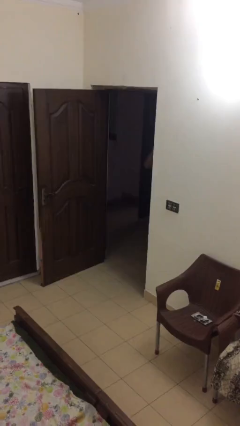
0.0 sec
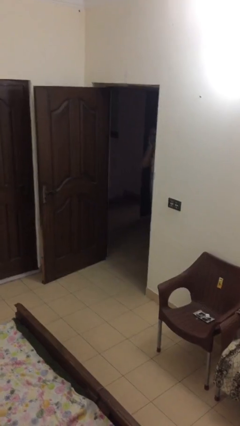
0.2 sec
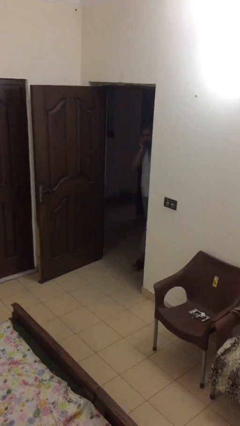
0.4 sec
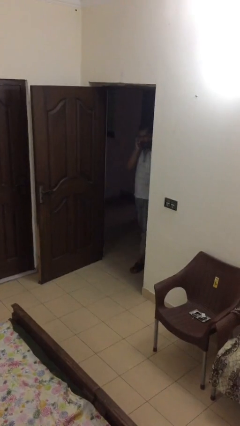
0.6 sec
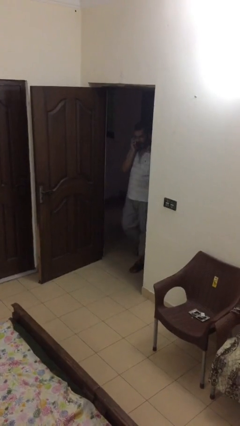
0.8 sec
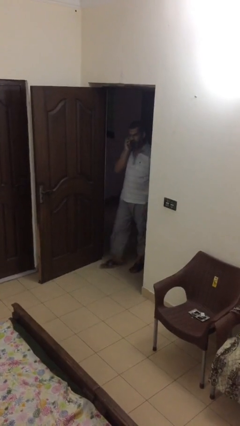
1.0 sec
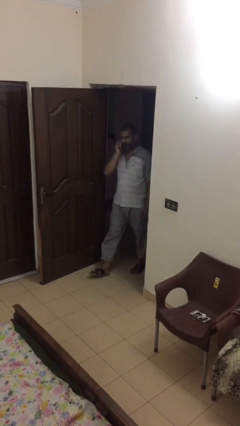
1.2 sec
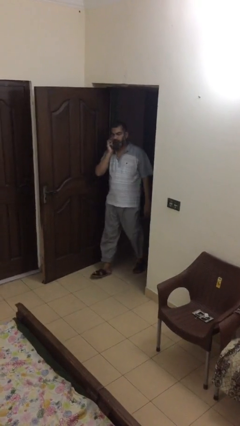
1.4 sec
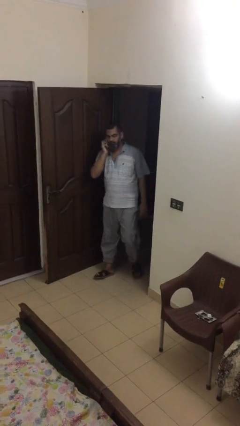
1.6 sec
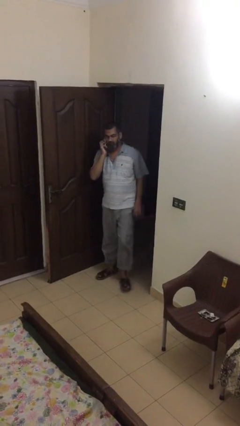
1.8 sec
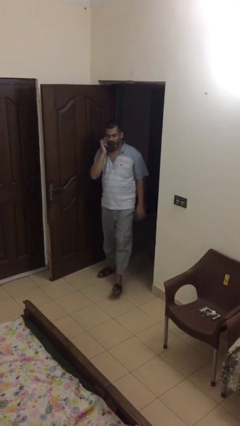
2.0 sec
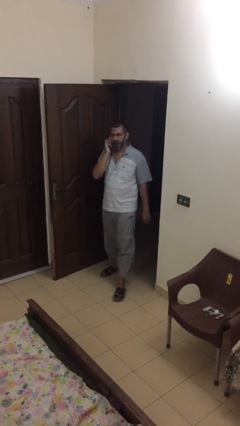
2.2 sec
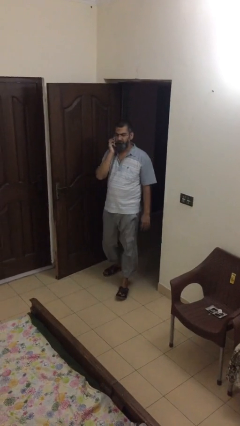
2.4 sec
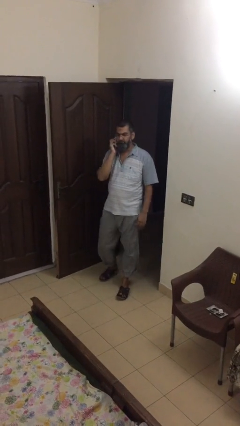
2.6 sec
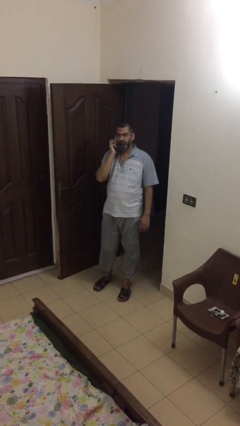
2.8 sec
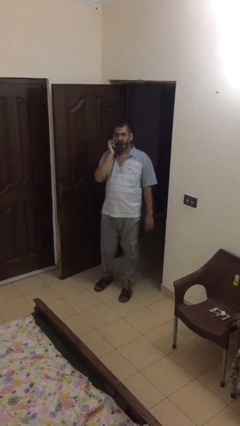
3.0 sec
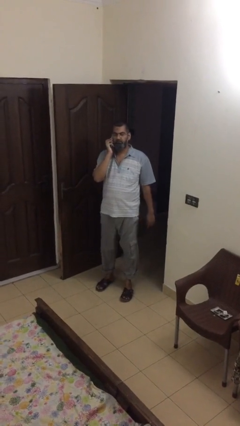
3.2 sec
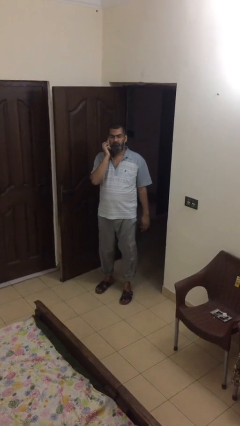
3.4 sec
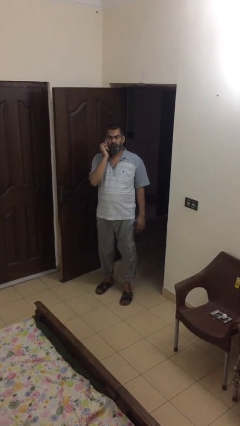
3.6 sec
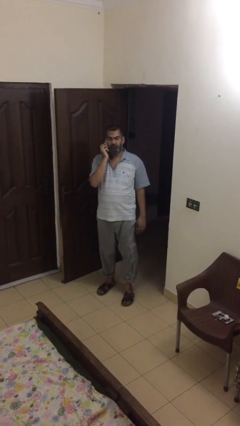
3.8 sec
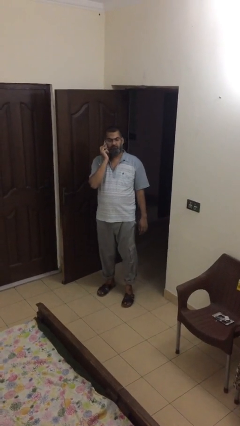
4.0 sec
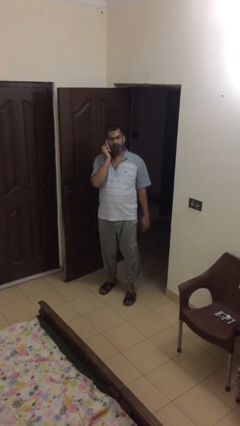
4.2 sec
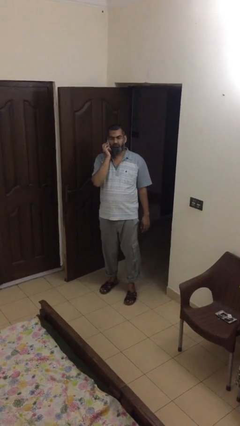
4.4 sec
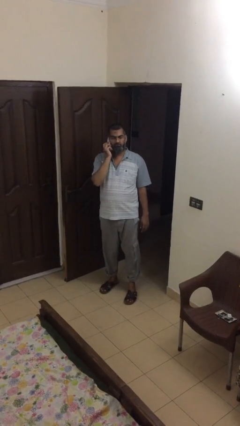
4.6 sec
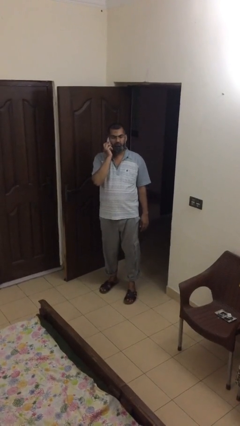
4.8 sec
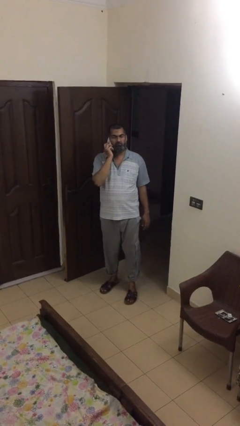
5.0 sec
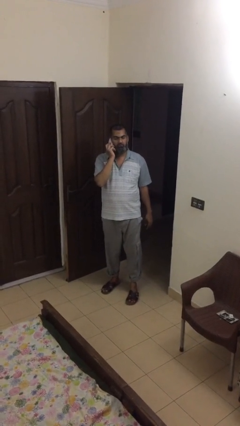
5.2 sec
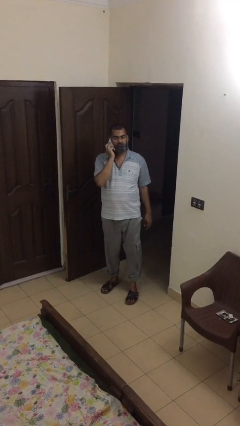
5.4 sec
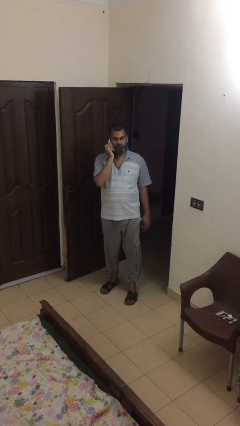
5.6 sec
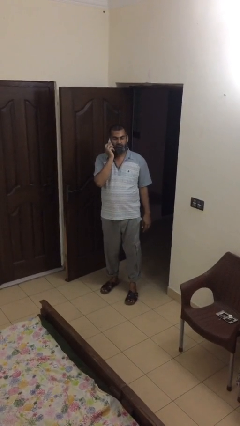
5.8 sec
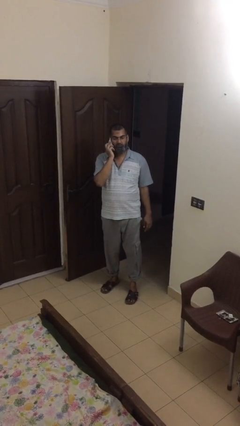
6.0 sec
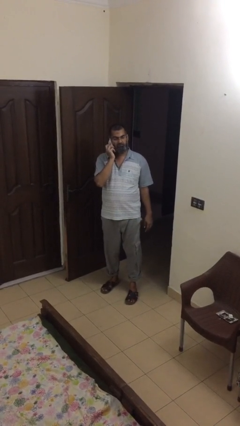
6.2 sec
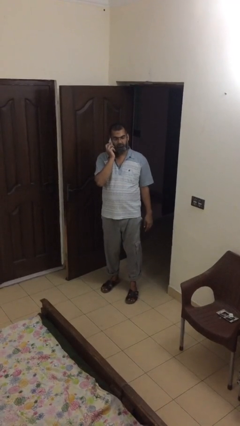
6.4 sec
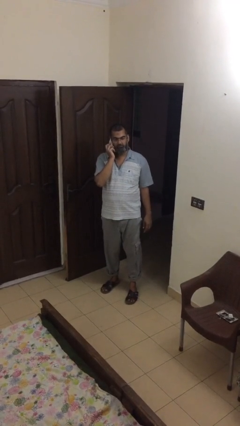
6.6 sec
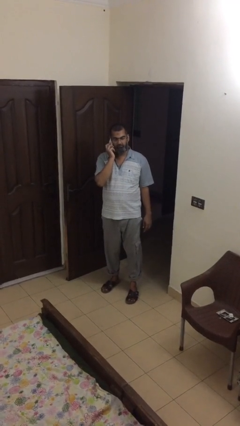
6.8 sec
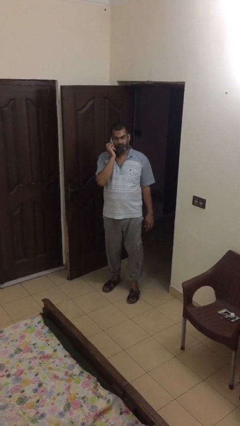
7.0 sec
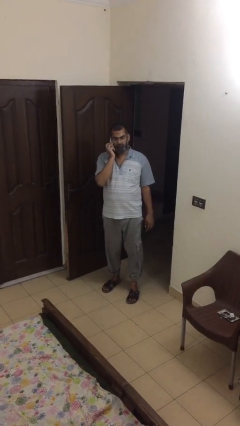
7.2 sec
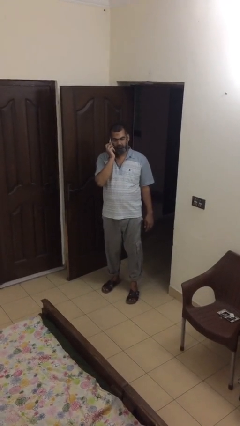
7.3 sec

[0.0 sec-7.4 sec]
person enters scene through structure

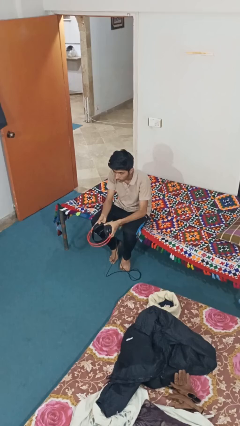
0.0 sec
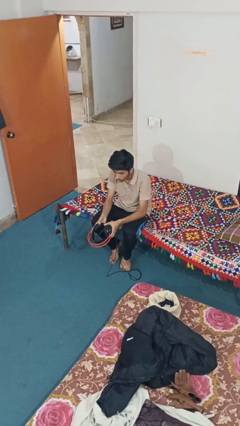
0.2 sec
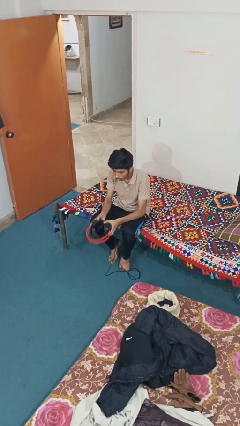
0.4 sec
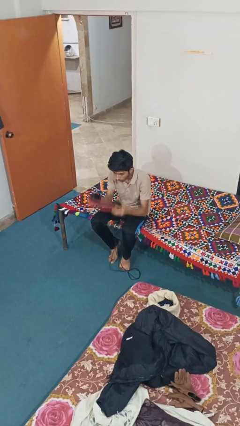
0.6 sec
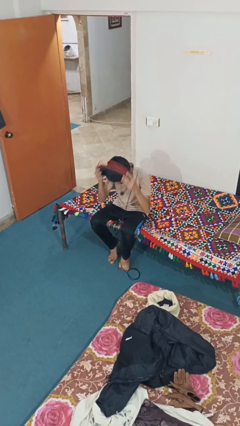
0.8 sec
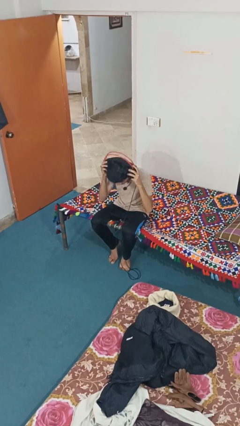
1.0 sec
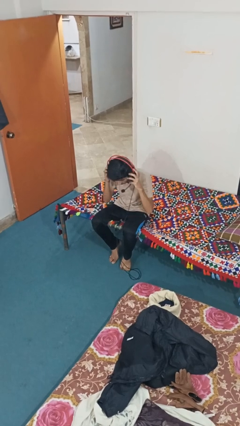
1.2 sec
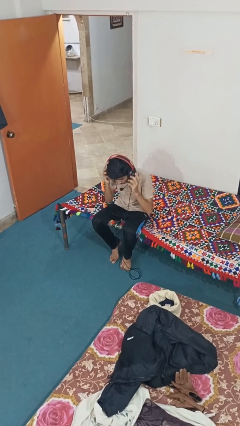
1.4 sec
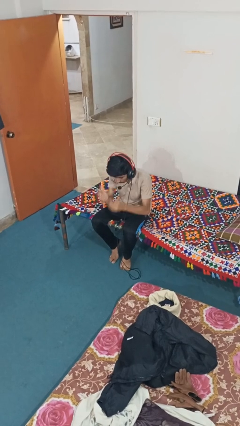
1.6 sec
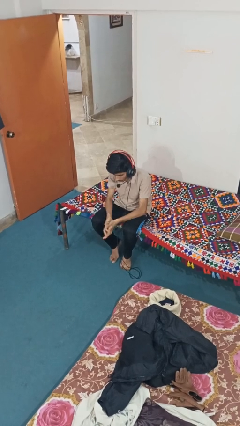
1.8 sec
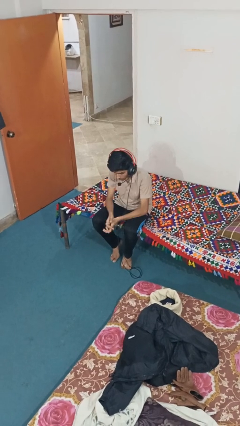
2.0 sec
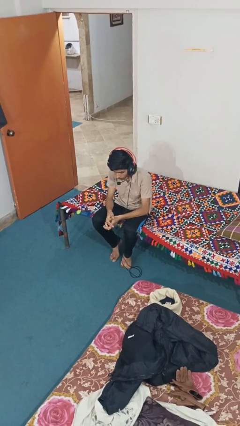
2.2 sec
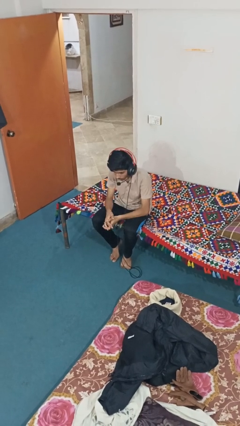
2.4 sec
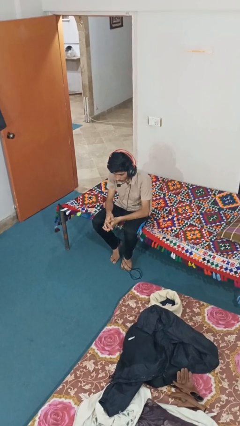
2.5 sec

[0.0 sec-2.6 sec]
person puts on headphones

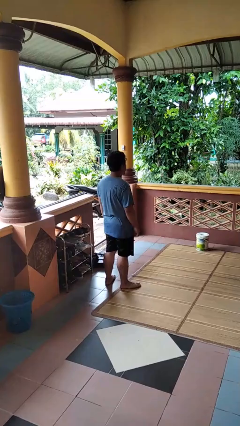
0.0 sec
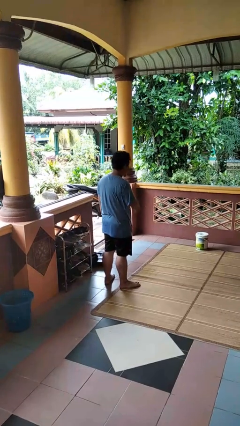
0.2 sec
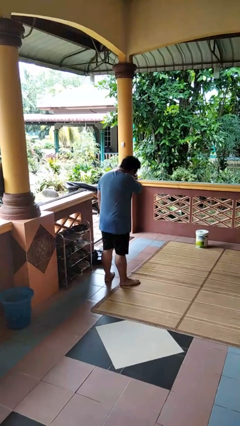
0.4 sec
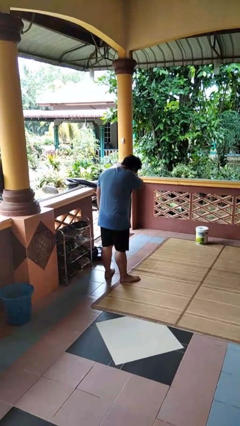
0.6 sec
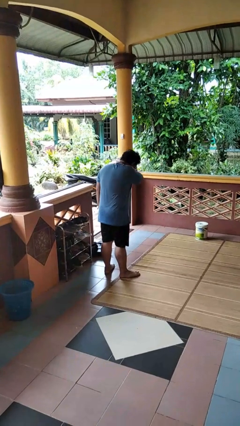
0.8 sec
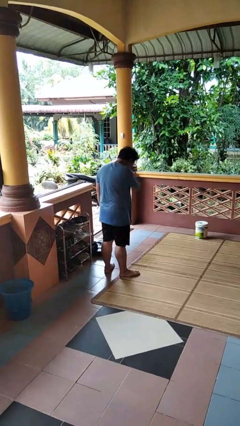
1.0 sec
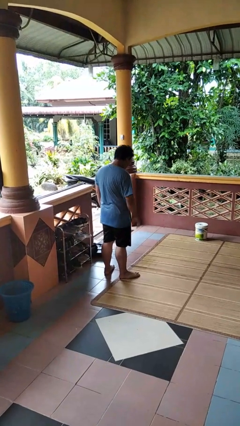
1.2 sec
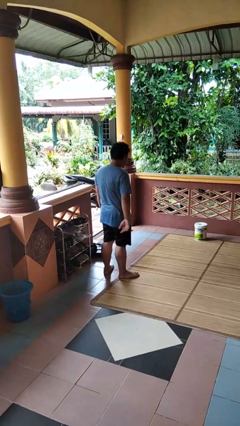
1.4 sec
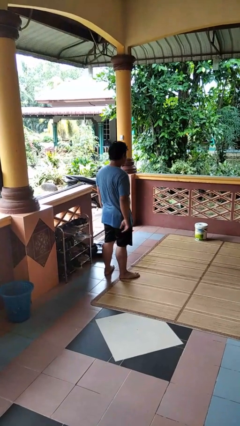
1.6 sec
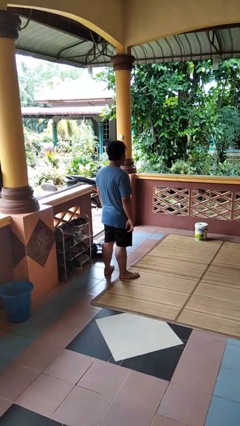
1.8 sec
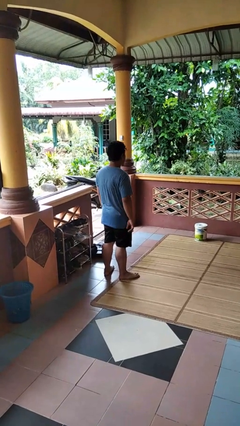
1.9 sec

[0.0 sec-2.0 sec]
person sneezes into hand

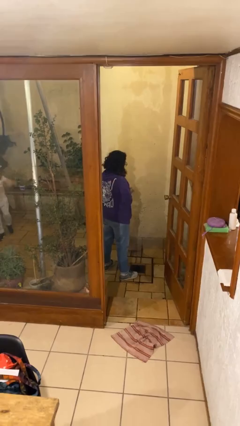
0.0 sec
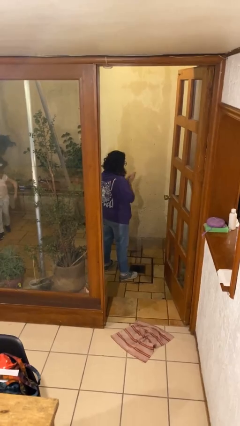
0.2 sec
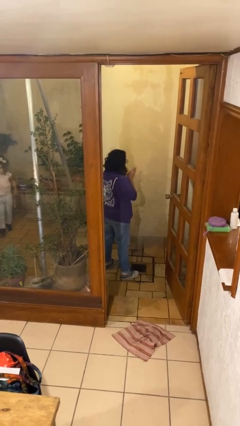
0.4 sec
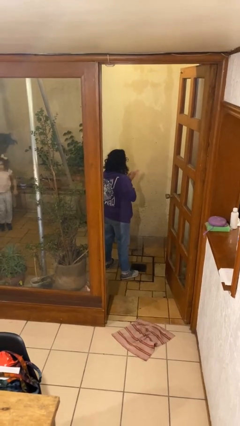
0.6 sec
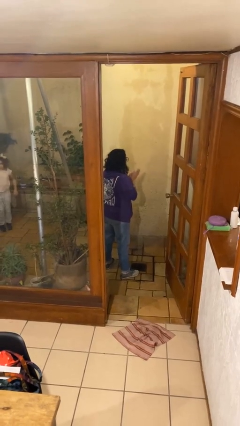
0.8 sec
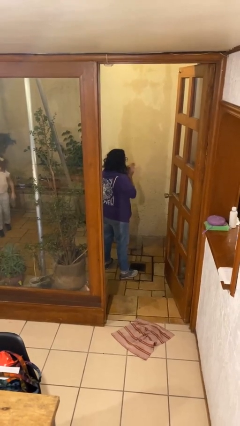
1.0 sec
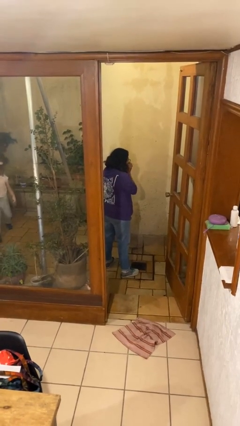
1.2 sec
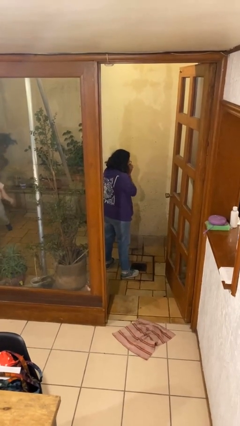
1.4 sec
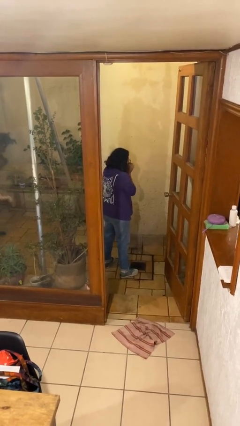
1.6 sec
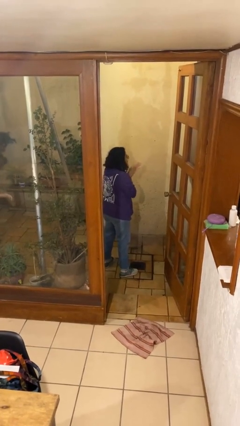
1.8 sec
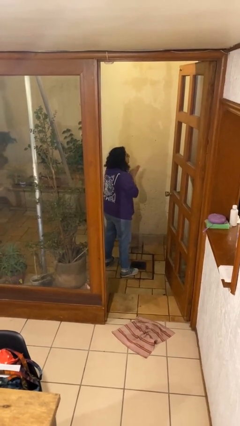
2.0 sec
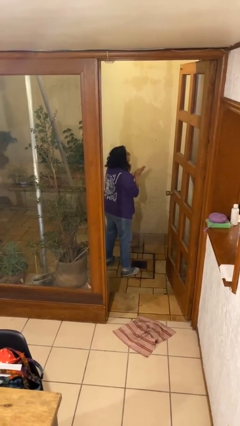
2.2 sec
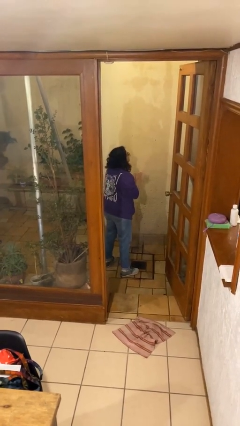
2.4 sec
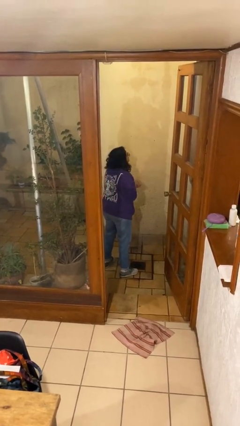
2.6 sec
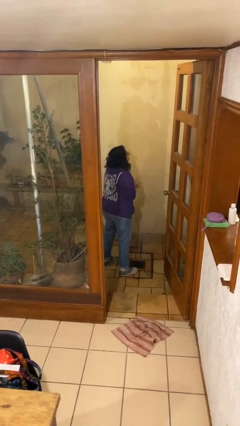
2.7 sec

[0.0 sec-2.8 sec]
person blows into hands

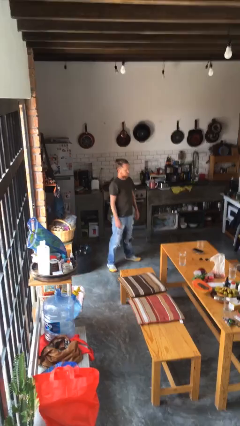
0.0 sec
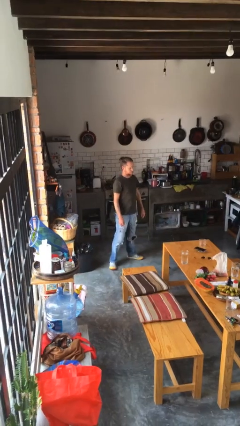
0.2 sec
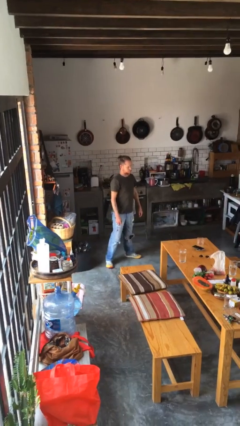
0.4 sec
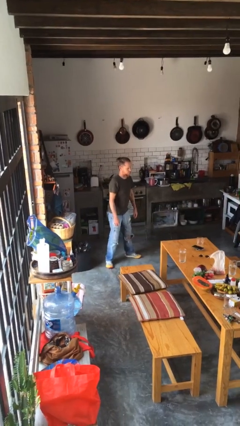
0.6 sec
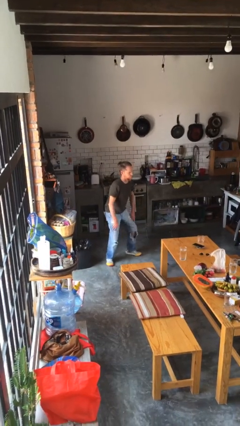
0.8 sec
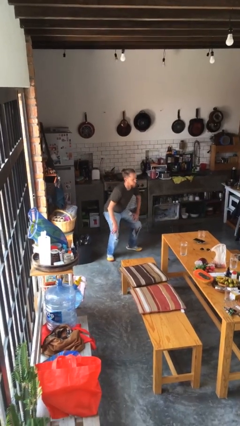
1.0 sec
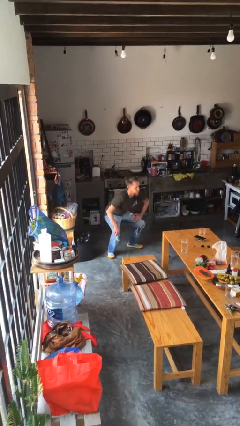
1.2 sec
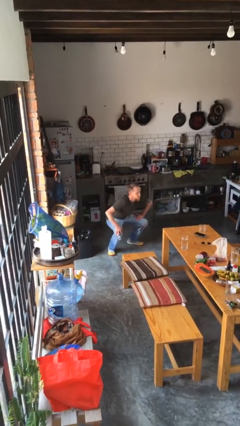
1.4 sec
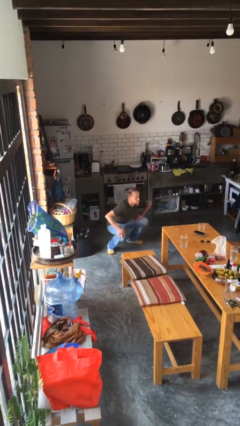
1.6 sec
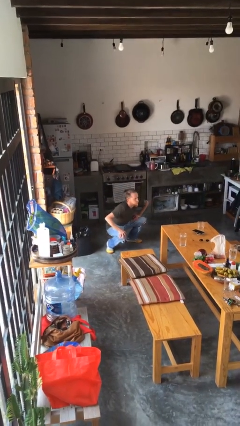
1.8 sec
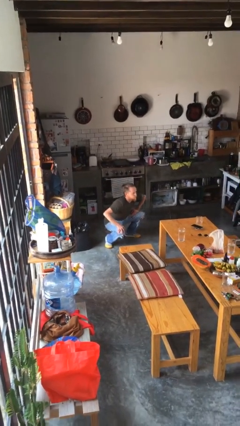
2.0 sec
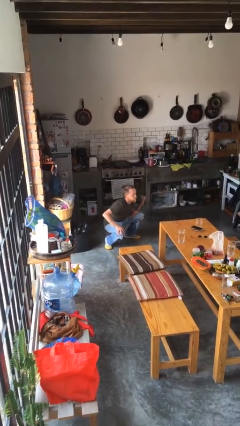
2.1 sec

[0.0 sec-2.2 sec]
person squats

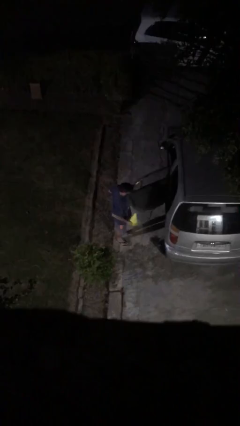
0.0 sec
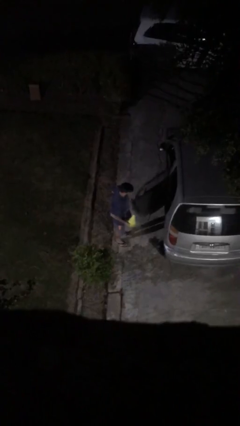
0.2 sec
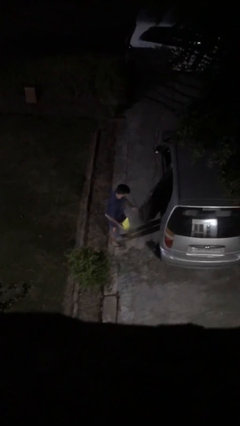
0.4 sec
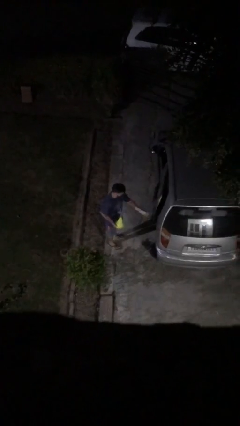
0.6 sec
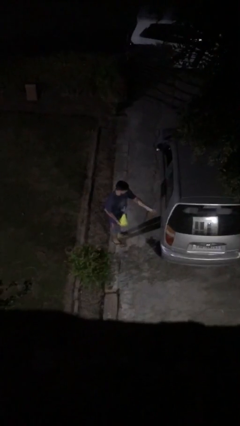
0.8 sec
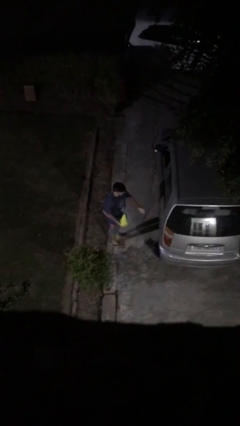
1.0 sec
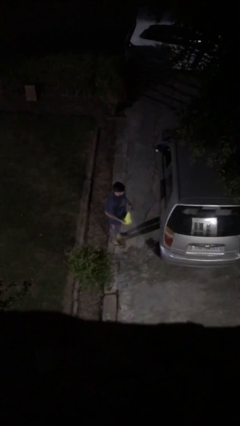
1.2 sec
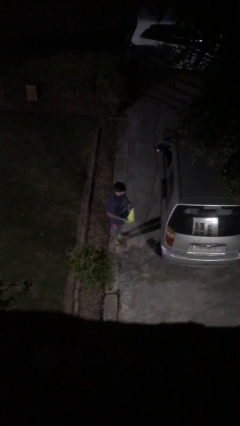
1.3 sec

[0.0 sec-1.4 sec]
person closes car door
